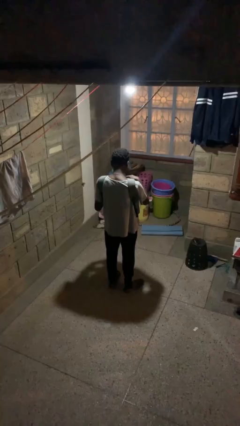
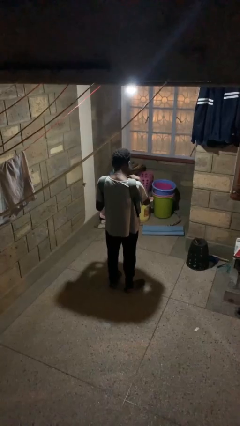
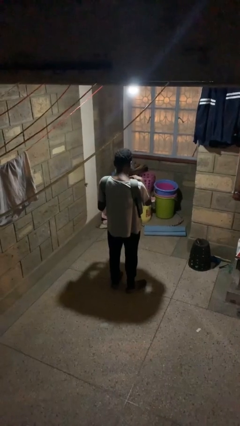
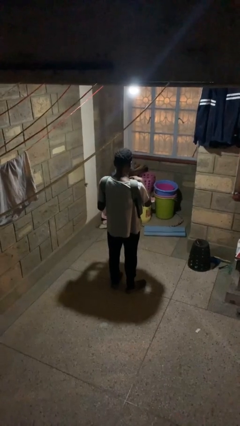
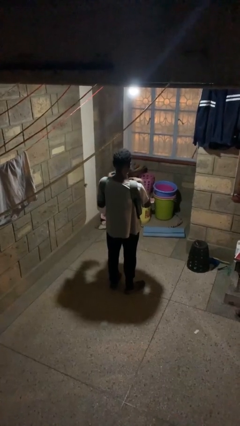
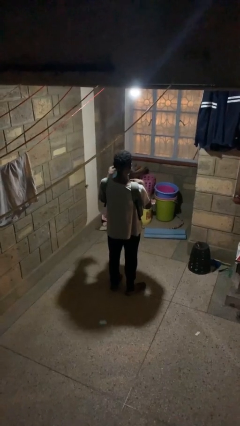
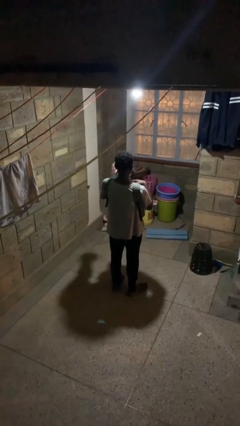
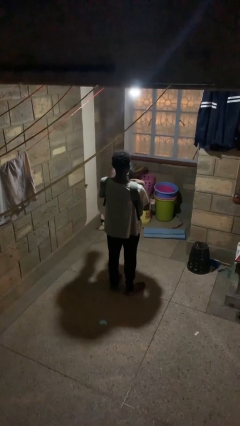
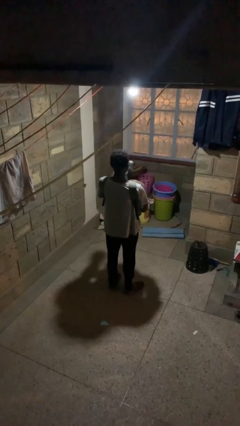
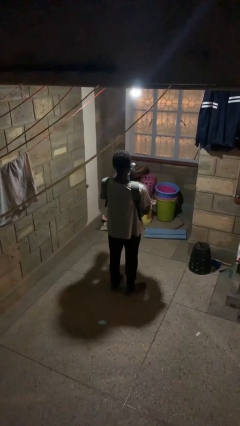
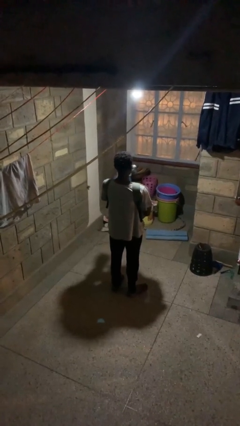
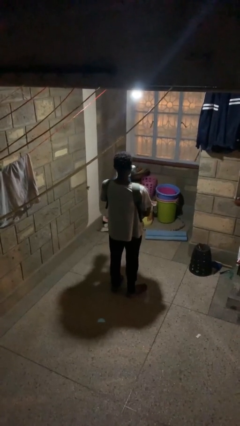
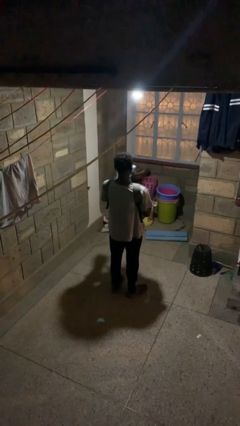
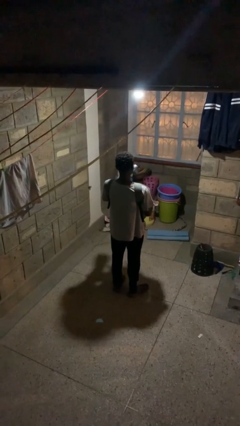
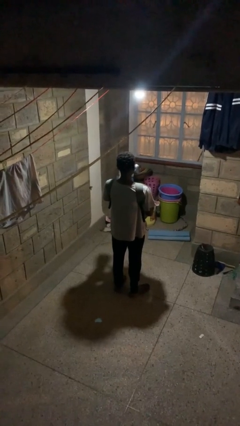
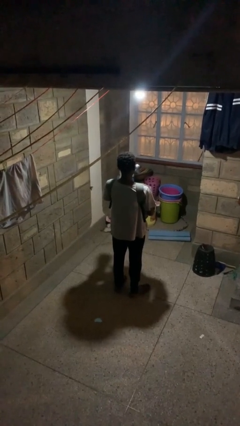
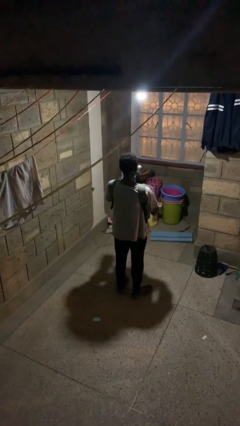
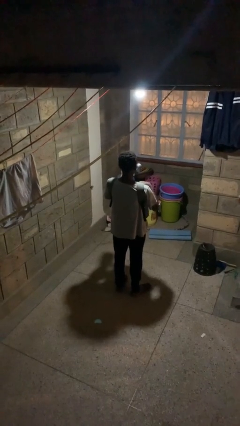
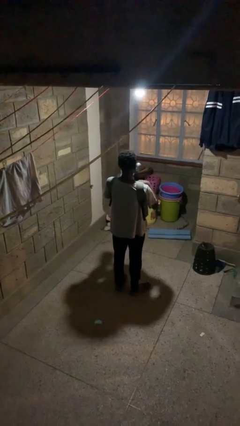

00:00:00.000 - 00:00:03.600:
person takes object from backpack

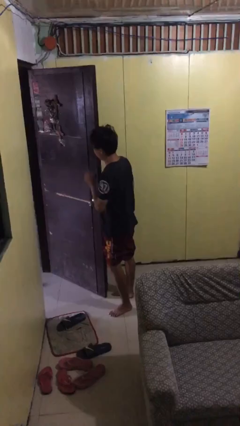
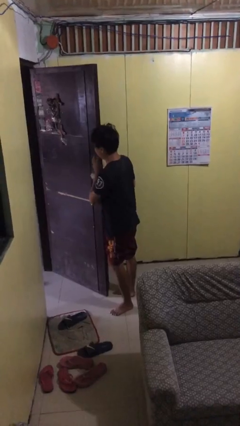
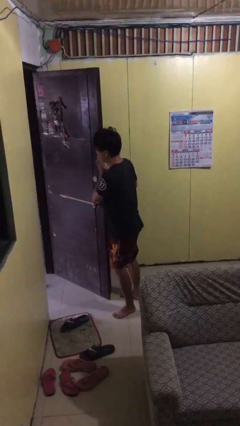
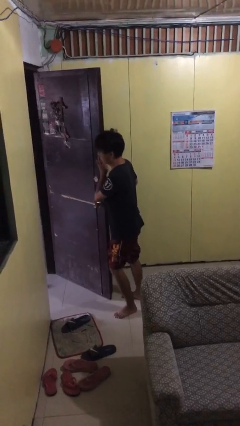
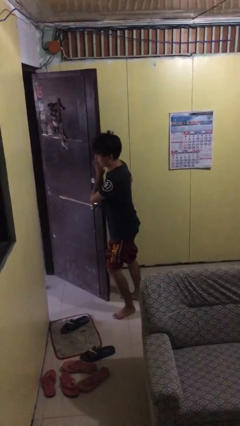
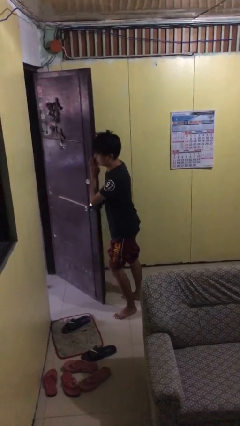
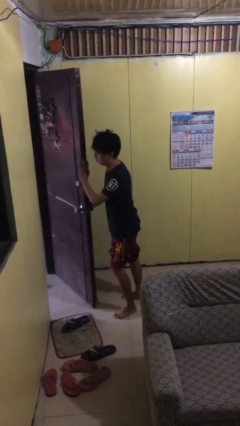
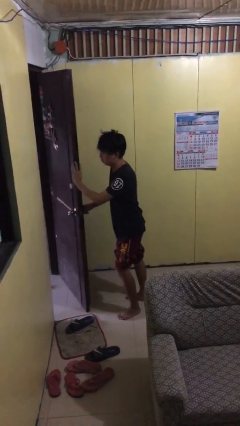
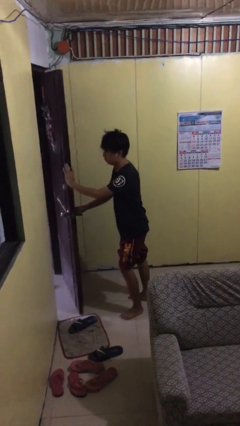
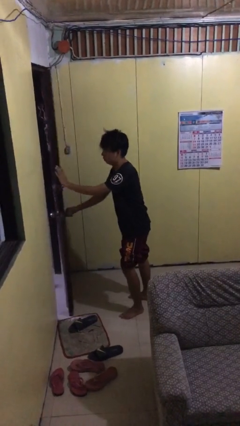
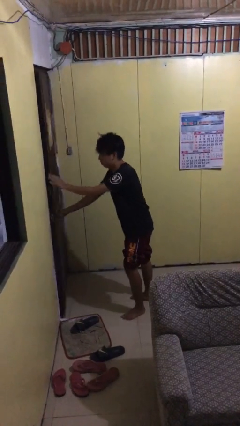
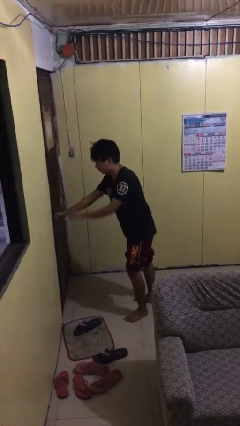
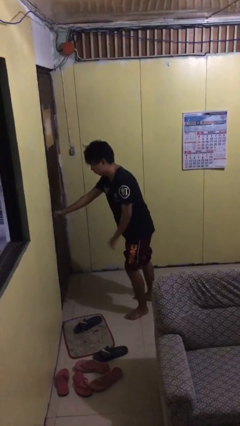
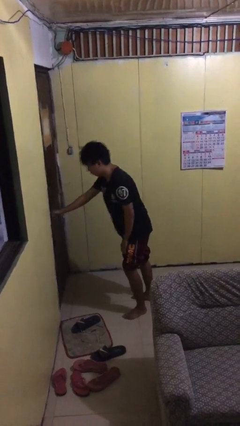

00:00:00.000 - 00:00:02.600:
person closes facility door

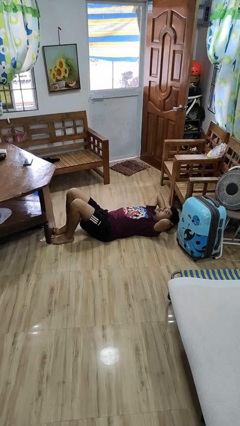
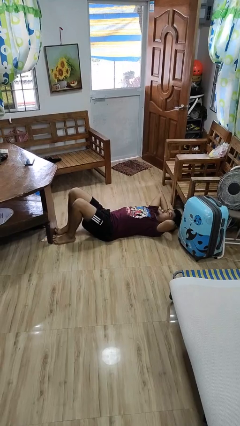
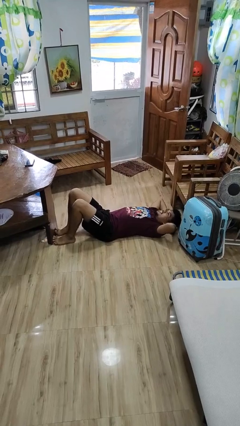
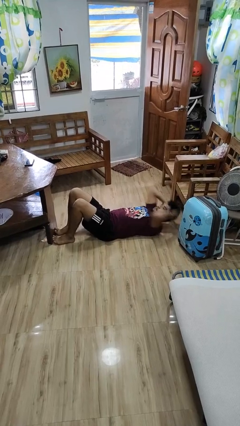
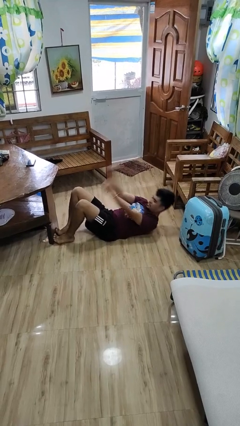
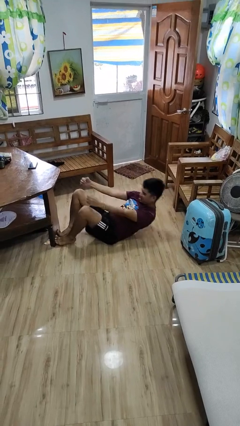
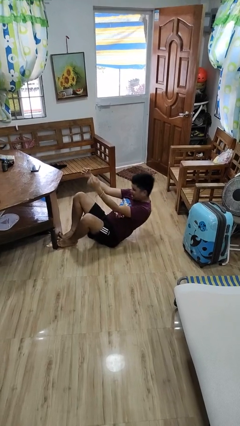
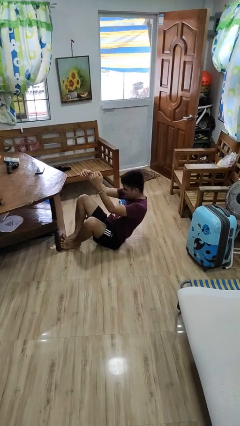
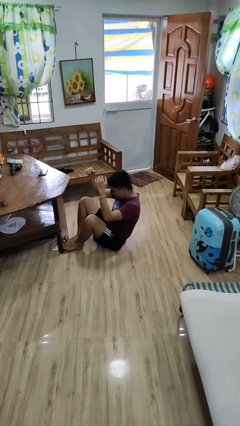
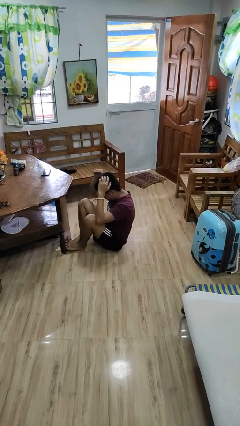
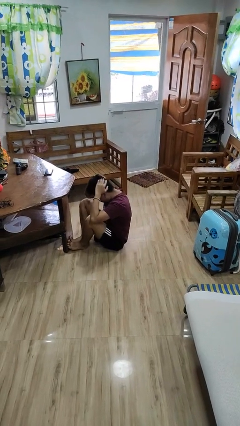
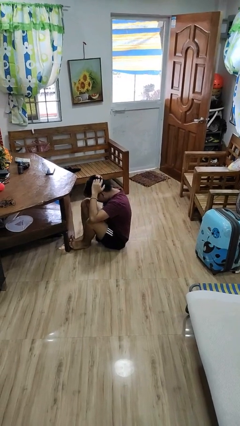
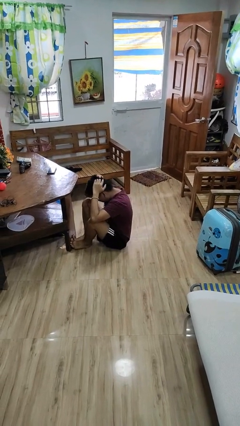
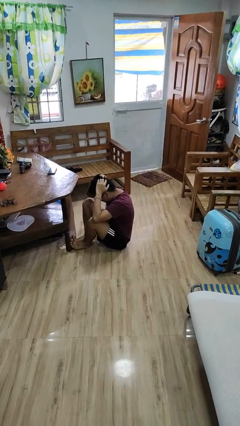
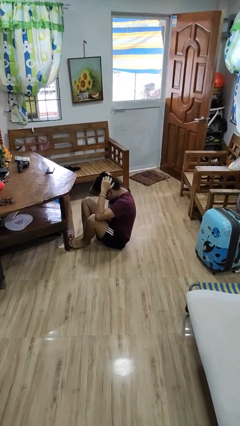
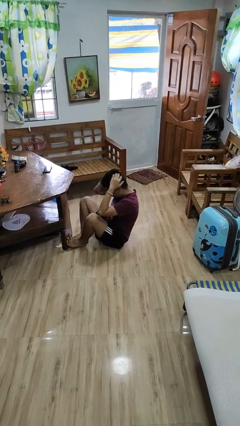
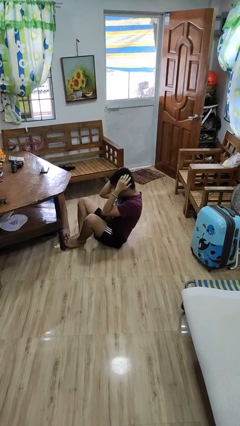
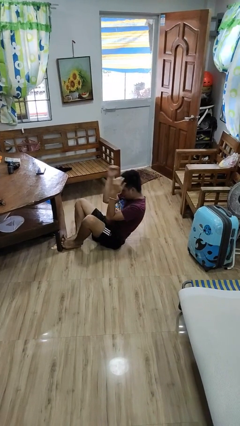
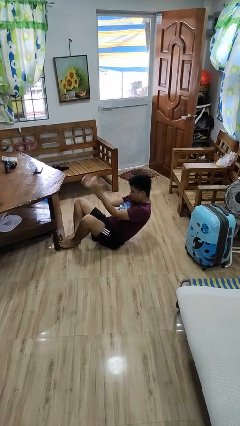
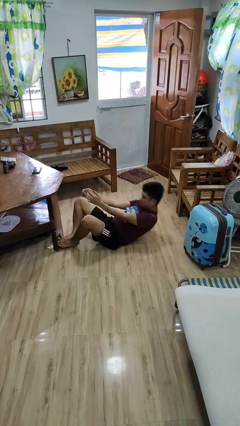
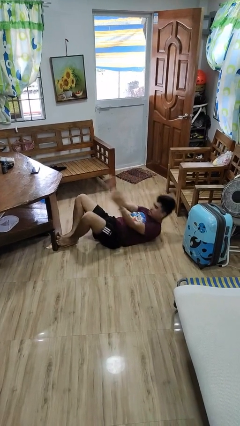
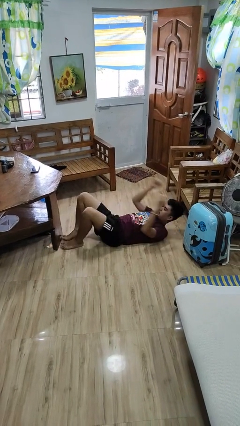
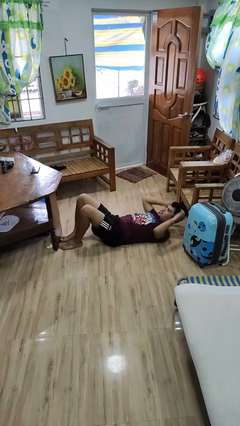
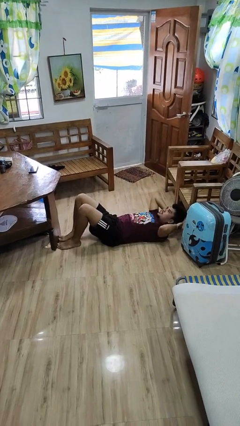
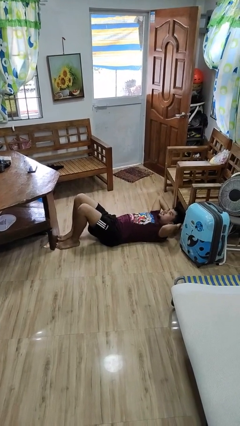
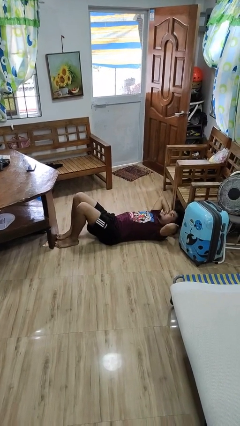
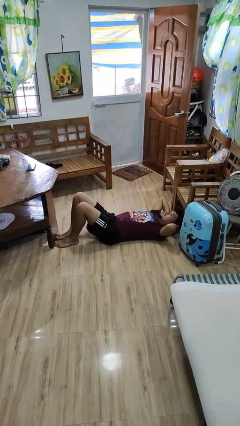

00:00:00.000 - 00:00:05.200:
person exercises with situp

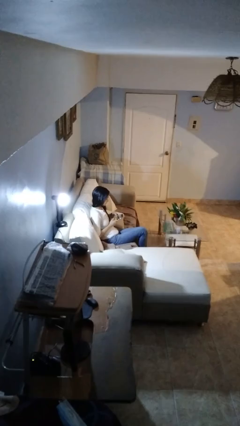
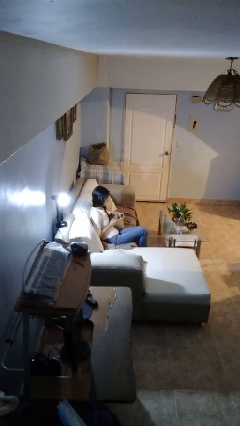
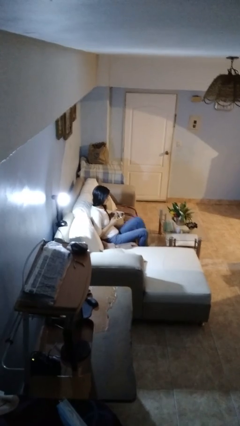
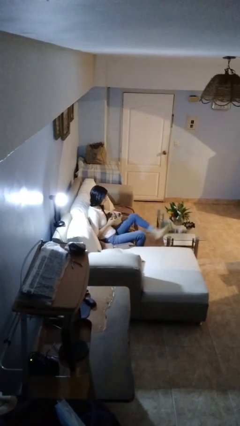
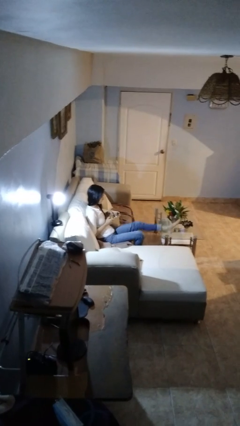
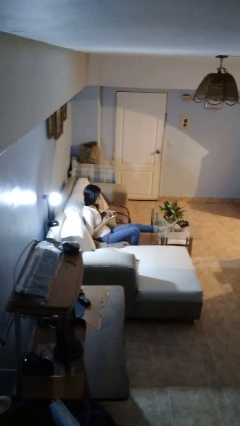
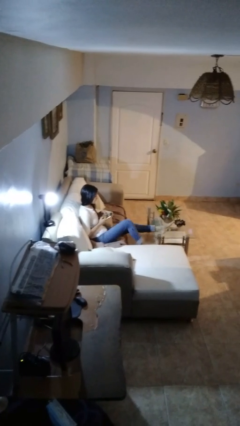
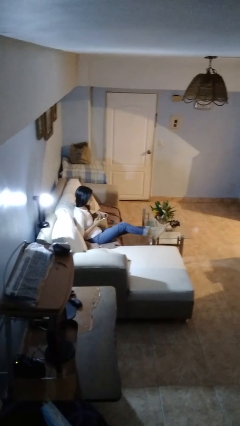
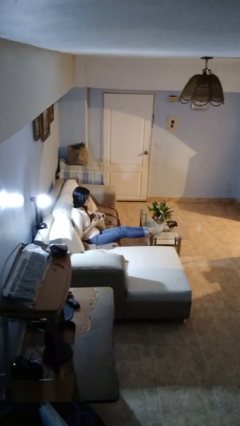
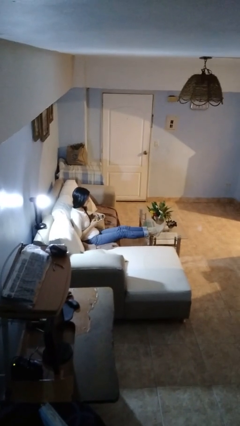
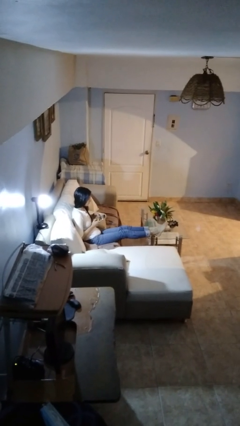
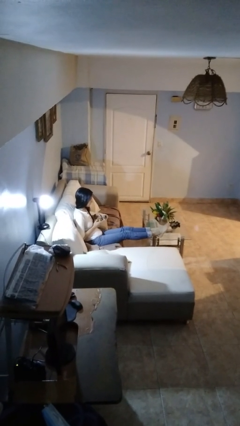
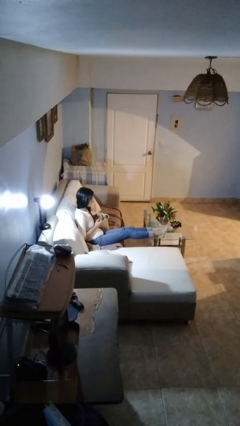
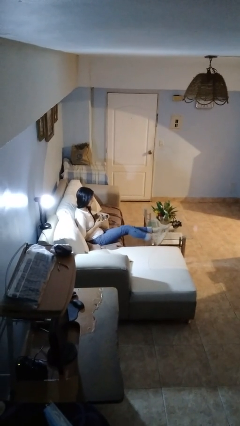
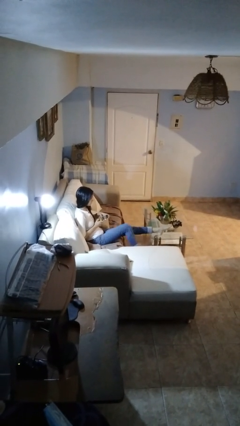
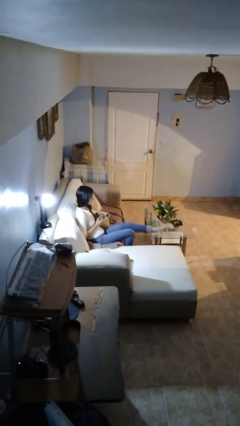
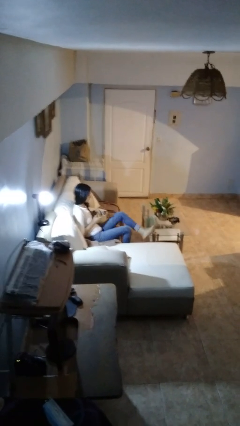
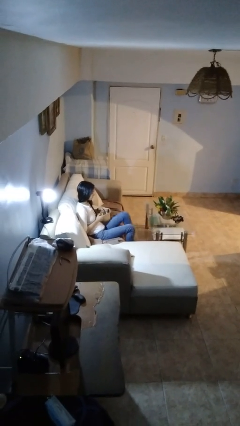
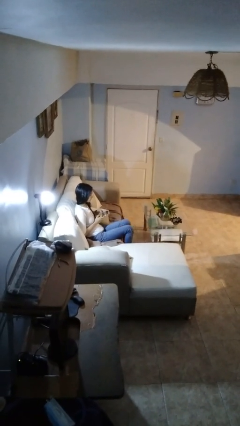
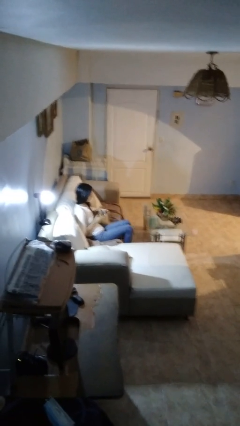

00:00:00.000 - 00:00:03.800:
person puts feet up

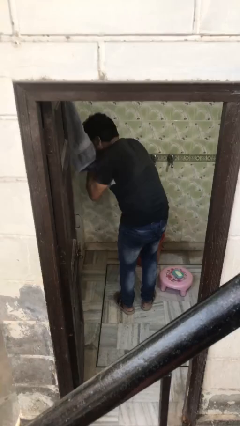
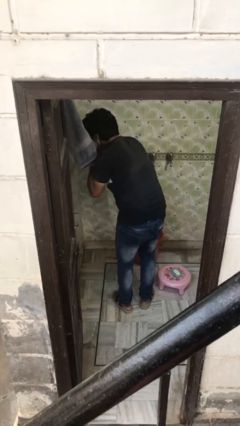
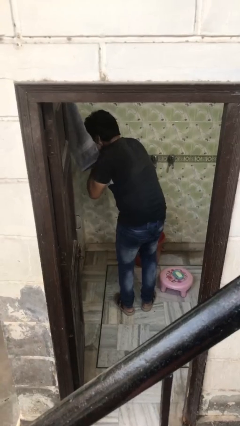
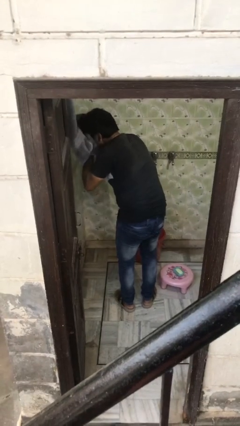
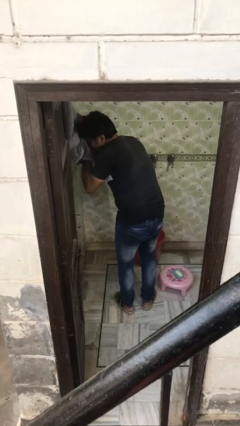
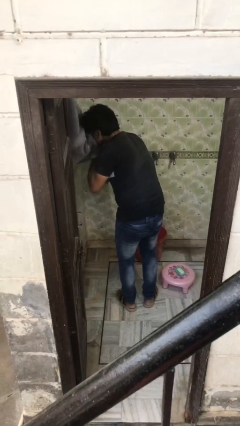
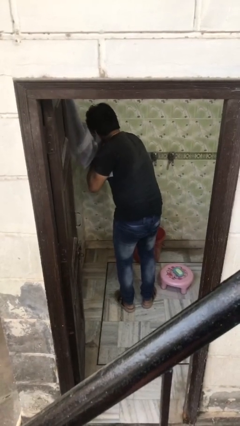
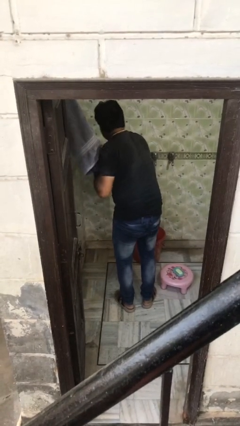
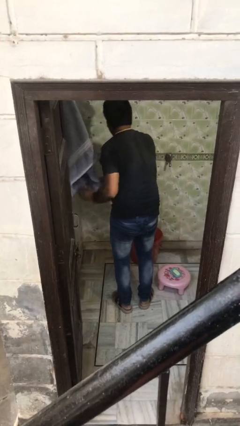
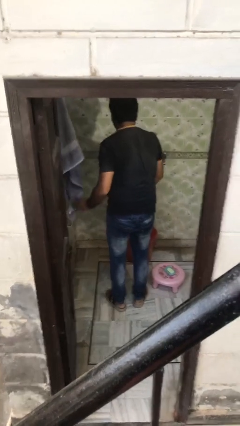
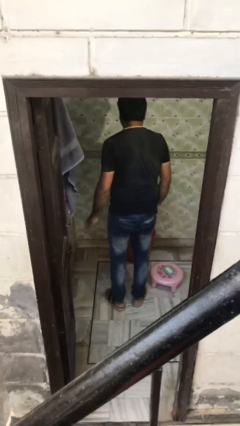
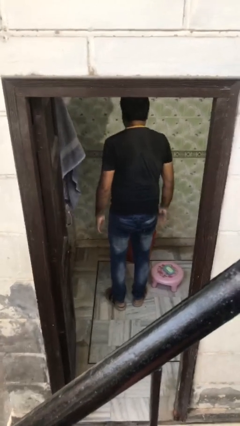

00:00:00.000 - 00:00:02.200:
person dries face with towel

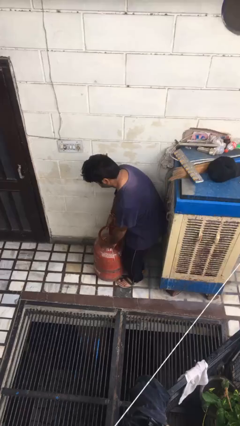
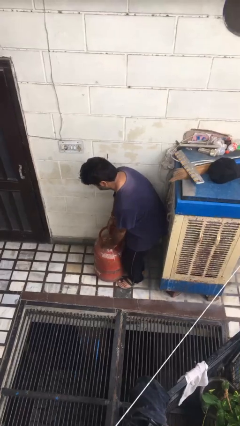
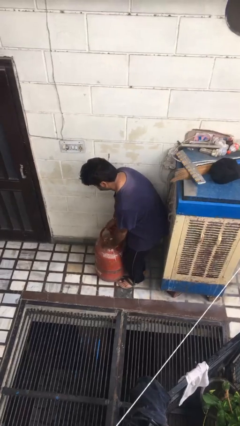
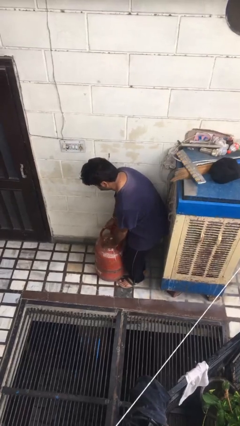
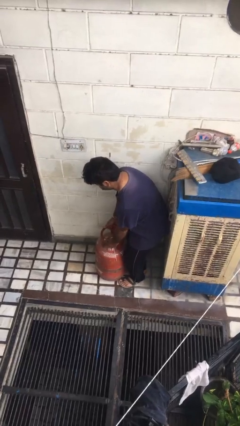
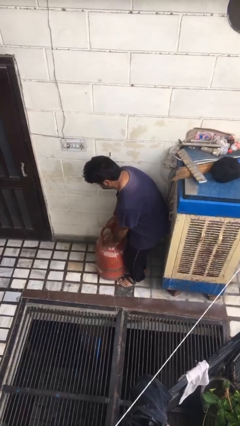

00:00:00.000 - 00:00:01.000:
person picks up object from floor
